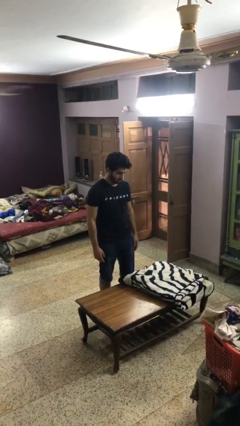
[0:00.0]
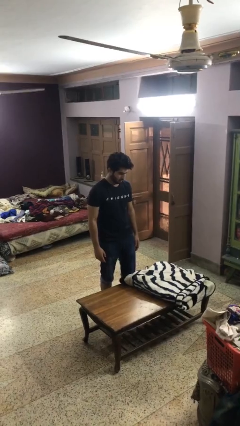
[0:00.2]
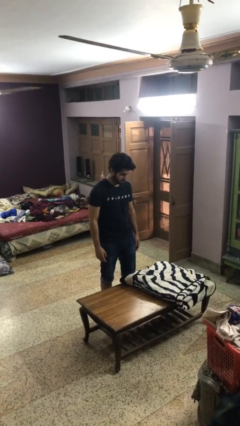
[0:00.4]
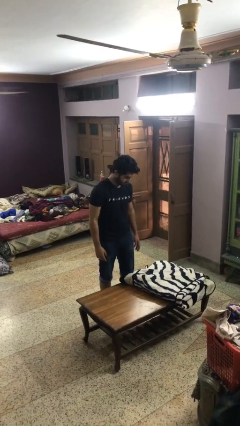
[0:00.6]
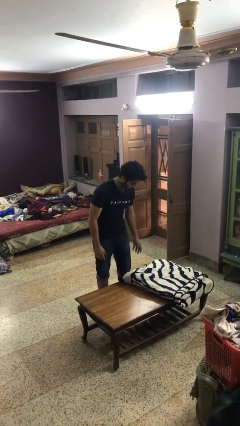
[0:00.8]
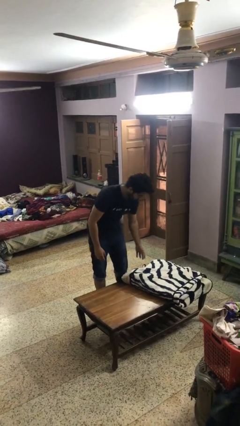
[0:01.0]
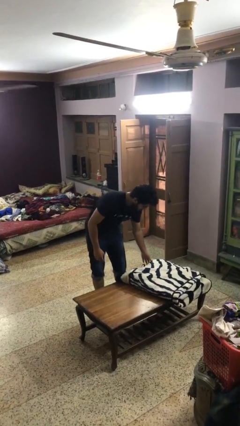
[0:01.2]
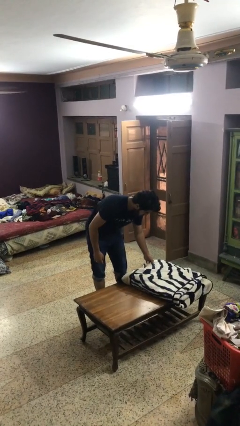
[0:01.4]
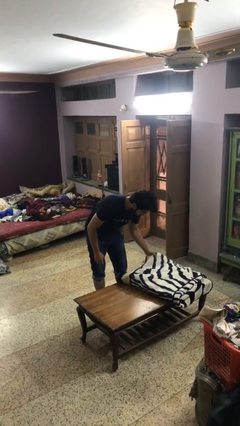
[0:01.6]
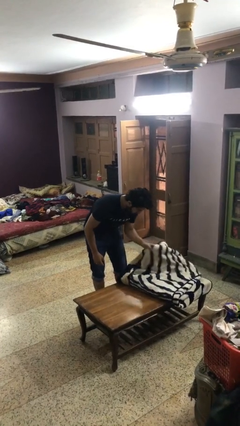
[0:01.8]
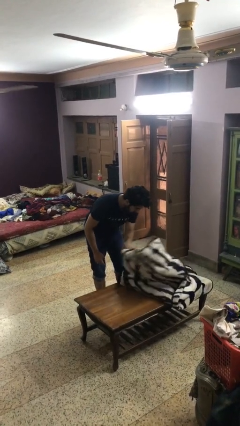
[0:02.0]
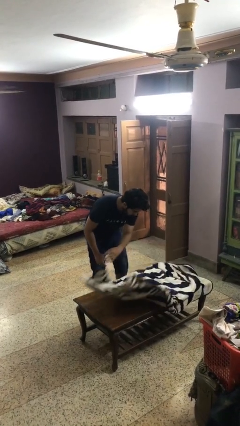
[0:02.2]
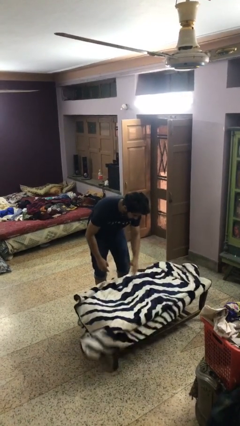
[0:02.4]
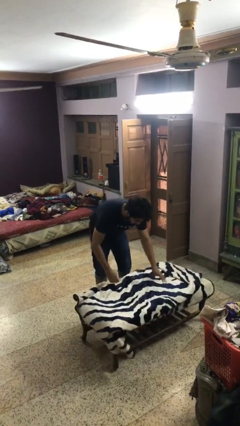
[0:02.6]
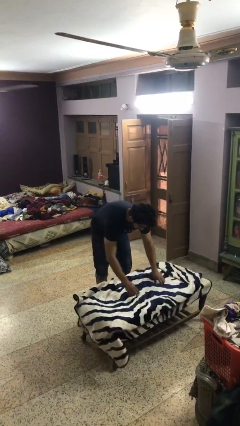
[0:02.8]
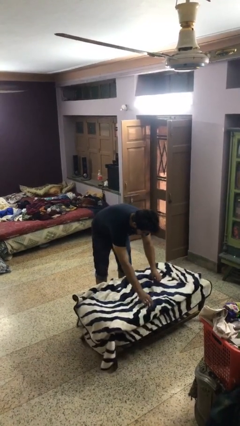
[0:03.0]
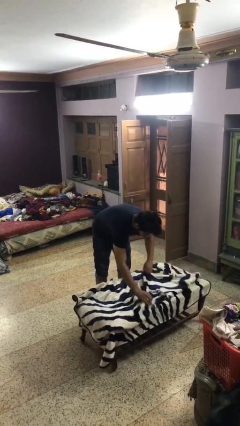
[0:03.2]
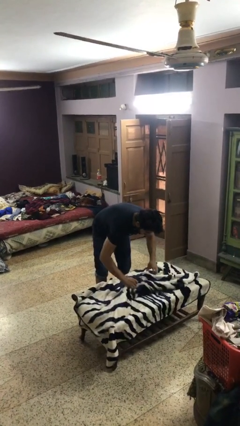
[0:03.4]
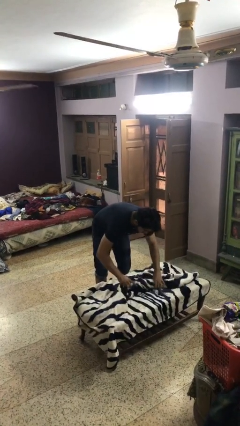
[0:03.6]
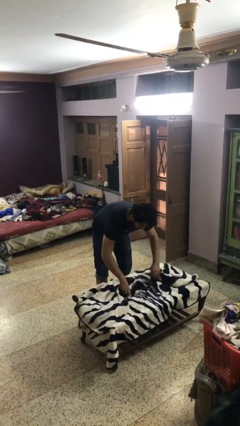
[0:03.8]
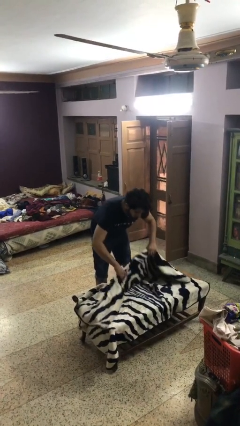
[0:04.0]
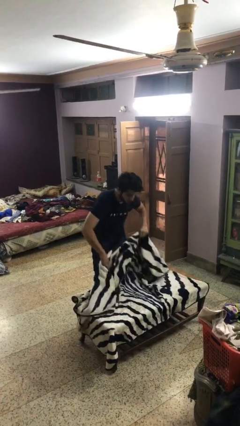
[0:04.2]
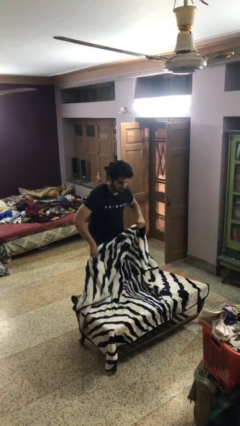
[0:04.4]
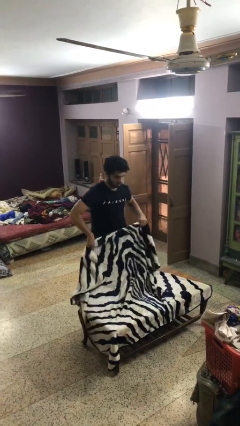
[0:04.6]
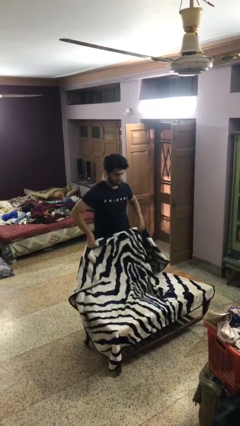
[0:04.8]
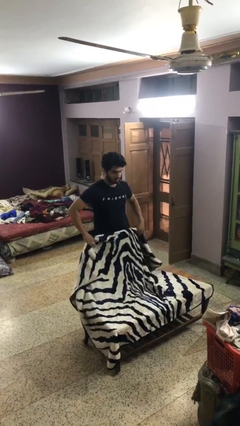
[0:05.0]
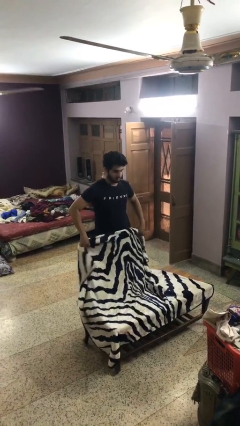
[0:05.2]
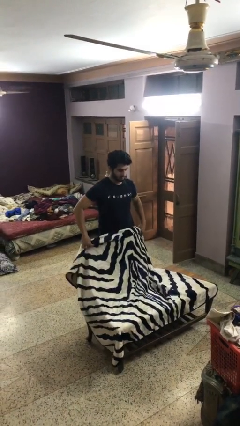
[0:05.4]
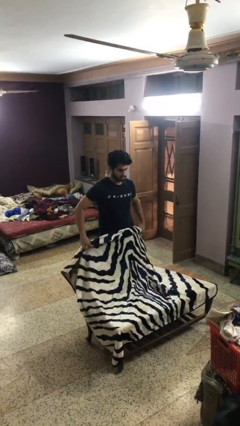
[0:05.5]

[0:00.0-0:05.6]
person unfolds blanket

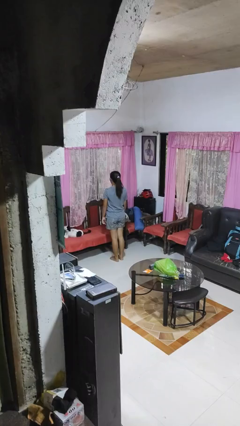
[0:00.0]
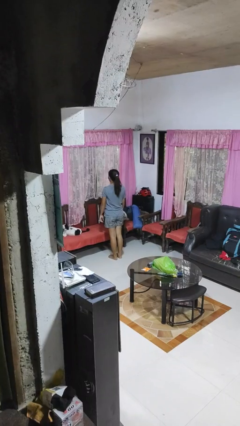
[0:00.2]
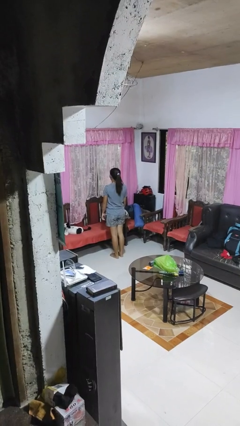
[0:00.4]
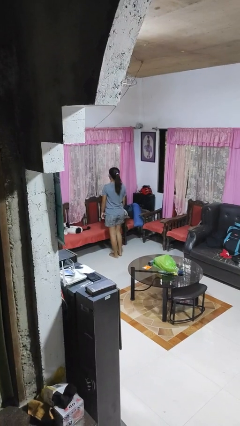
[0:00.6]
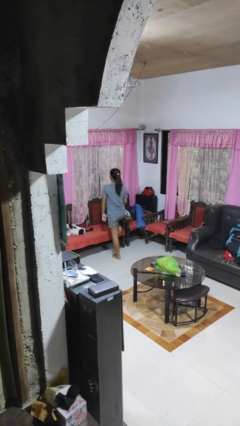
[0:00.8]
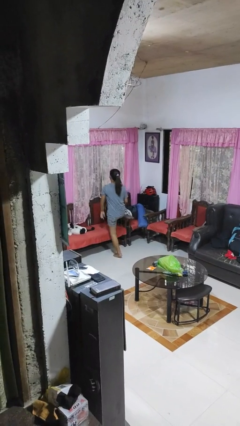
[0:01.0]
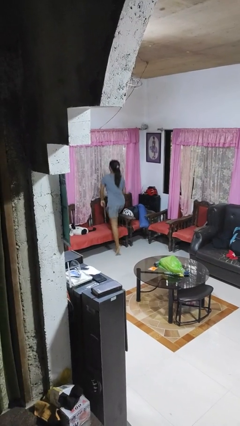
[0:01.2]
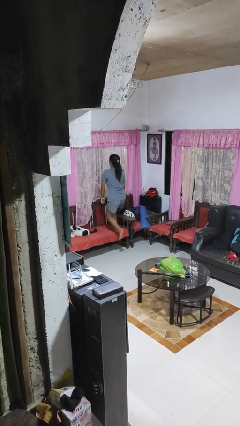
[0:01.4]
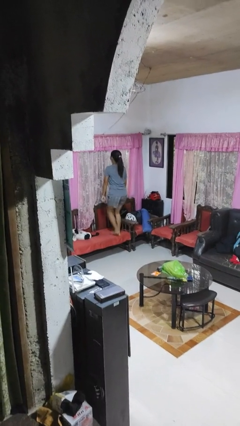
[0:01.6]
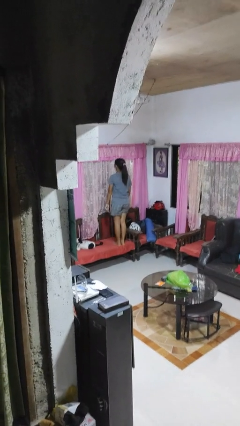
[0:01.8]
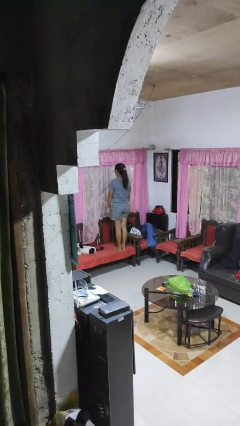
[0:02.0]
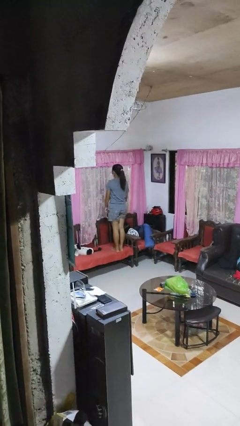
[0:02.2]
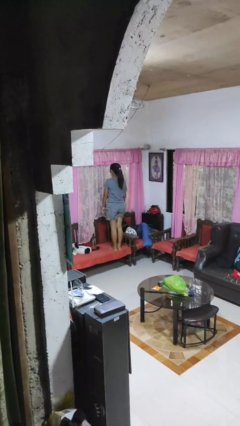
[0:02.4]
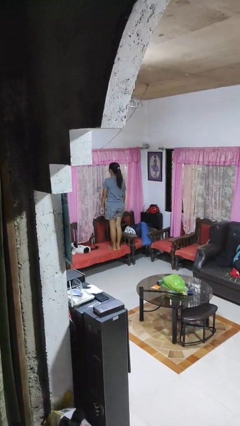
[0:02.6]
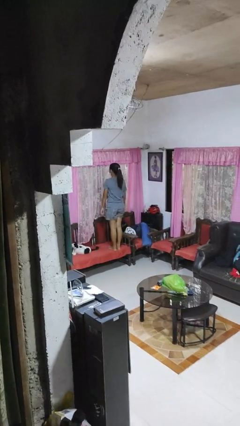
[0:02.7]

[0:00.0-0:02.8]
person climbs on chair

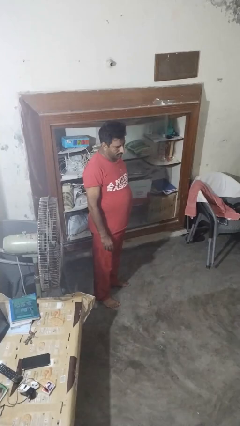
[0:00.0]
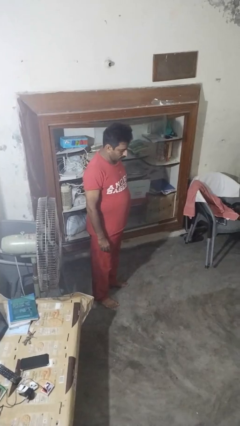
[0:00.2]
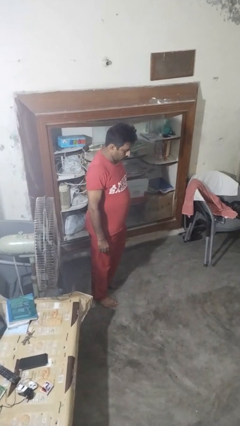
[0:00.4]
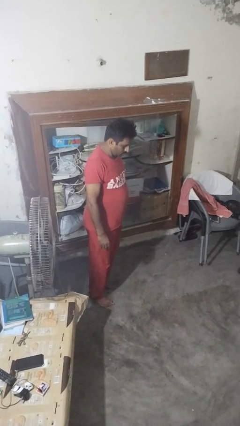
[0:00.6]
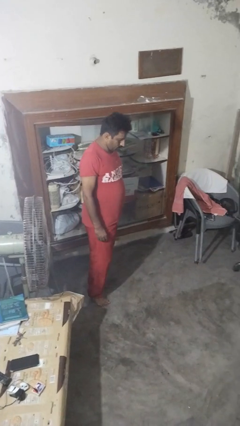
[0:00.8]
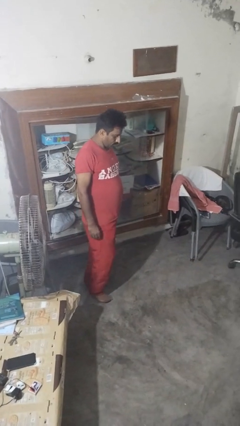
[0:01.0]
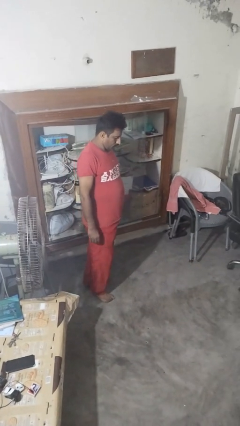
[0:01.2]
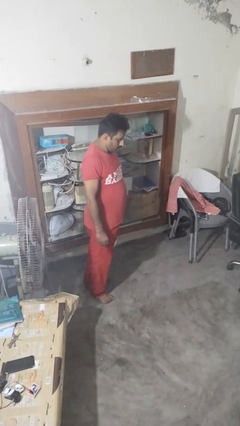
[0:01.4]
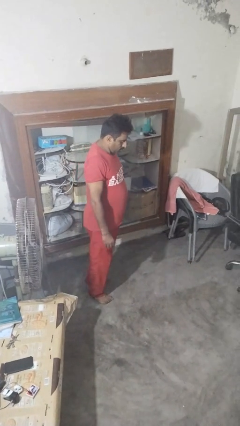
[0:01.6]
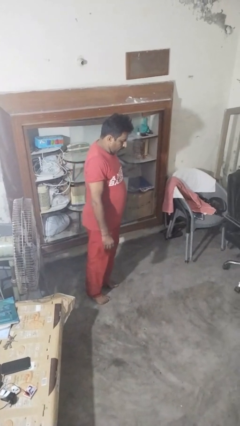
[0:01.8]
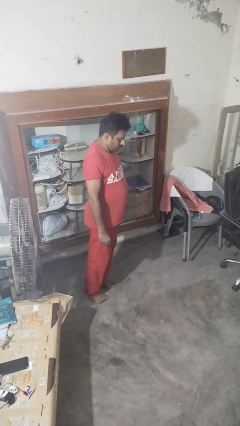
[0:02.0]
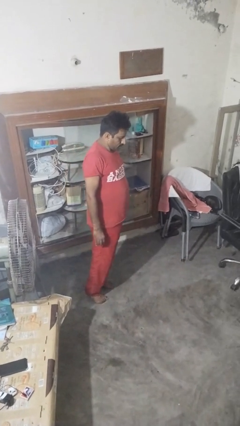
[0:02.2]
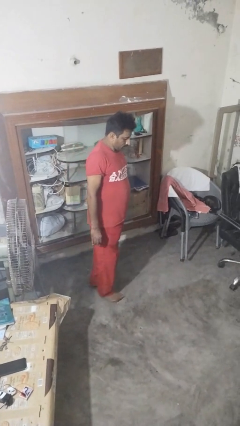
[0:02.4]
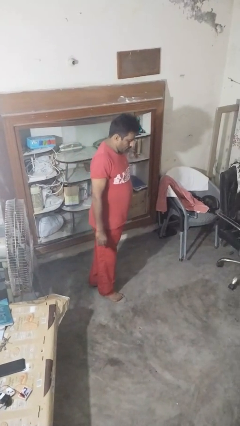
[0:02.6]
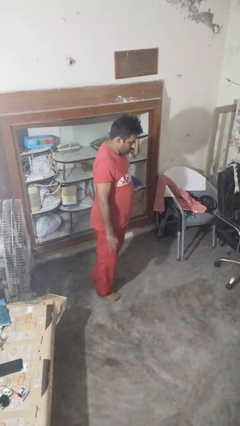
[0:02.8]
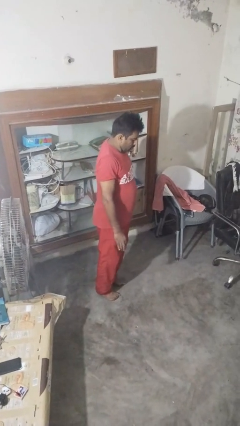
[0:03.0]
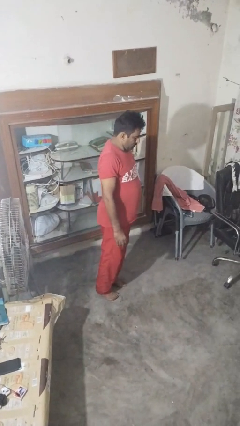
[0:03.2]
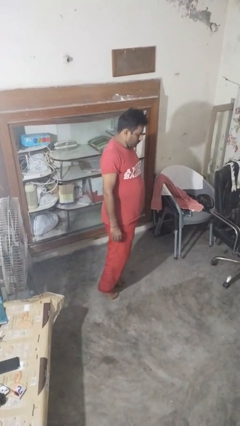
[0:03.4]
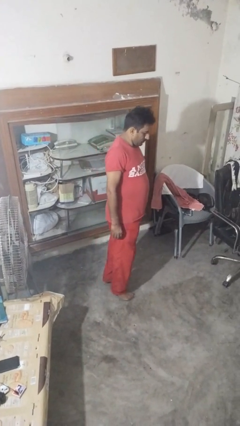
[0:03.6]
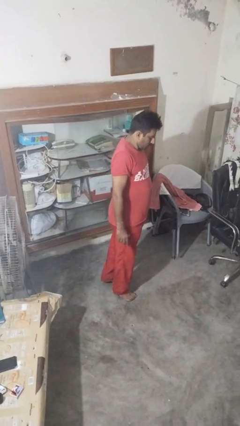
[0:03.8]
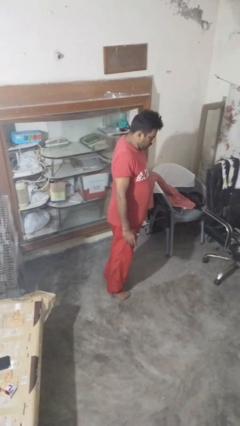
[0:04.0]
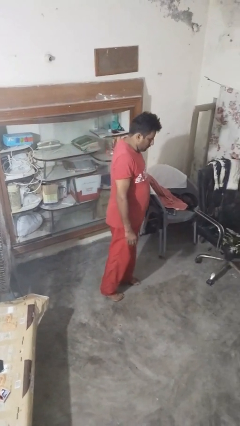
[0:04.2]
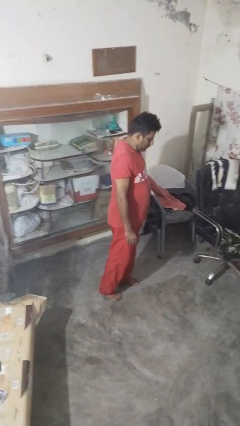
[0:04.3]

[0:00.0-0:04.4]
person walks tiptoe

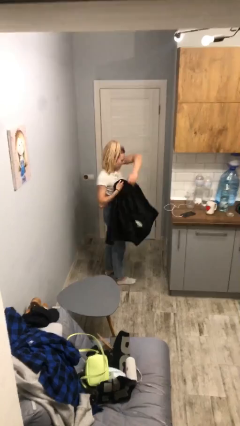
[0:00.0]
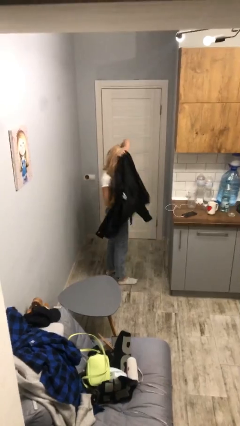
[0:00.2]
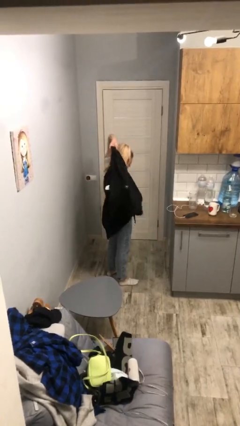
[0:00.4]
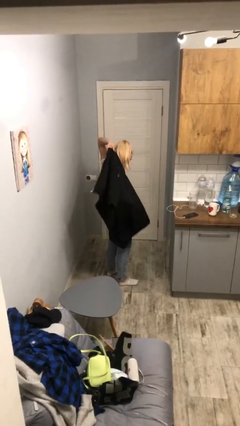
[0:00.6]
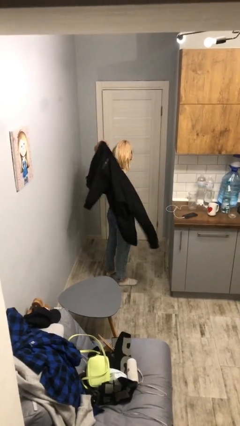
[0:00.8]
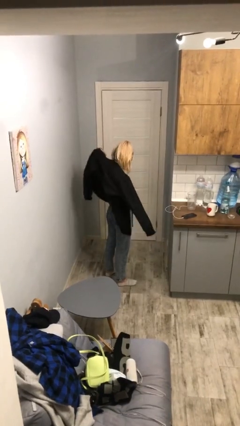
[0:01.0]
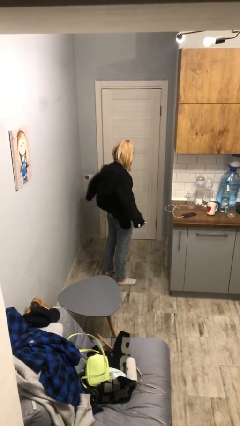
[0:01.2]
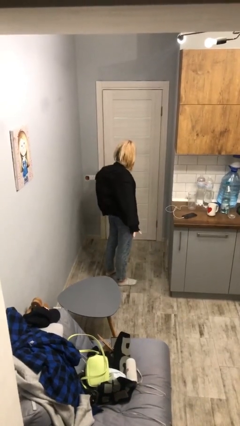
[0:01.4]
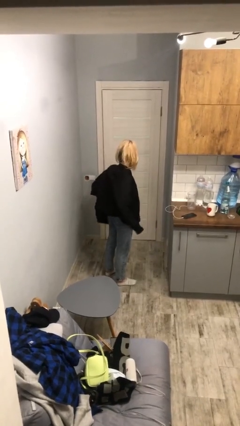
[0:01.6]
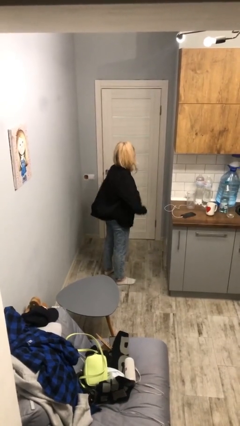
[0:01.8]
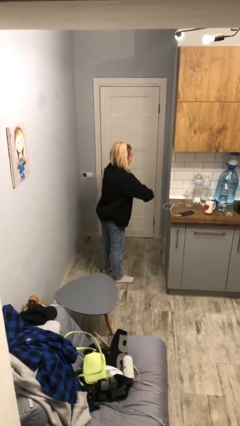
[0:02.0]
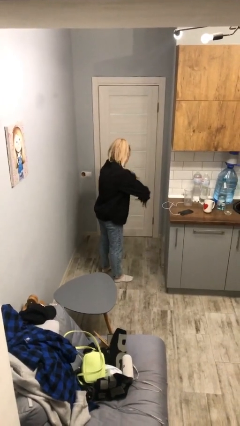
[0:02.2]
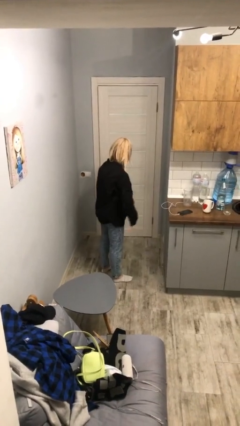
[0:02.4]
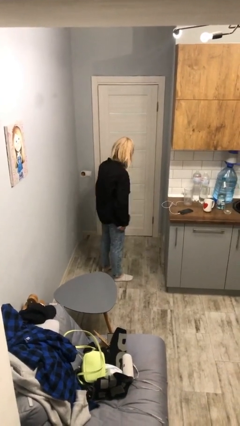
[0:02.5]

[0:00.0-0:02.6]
person puts on jacket

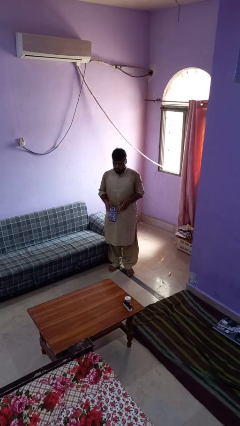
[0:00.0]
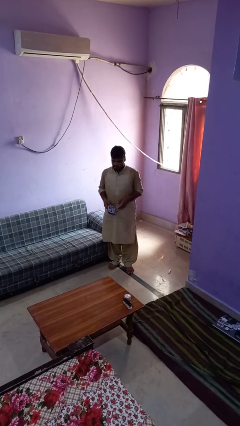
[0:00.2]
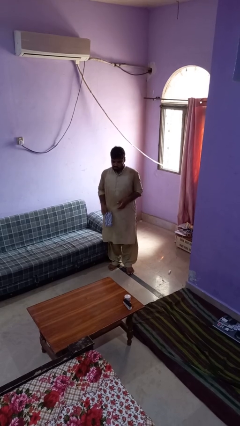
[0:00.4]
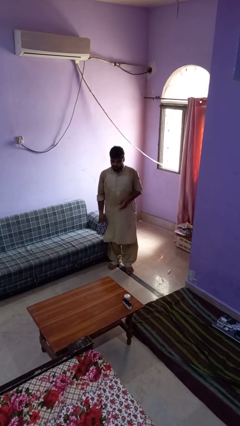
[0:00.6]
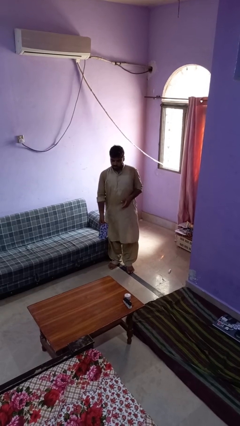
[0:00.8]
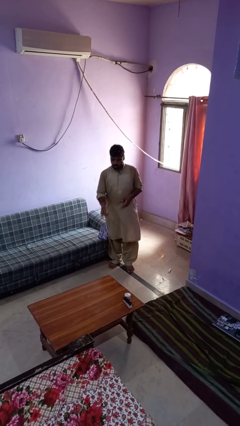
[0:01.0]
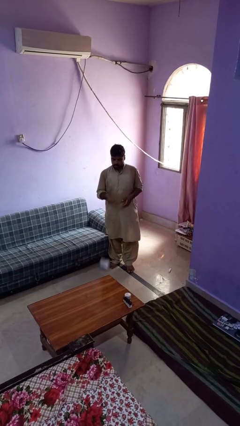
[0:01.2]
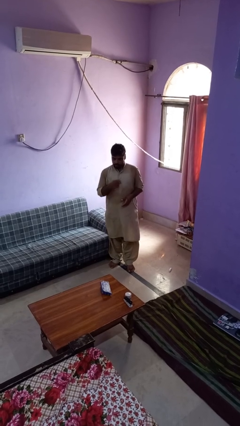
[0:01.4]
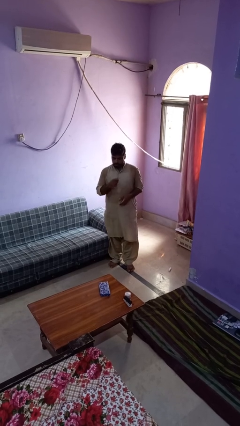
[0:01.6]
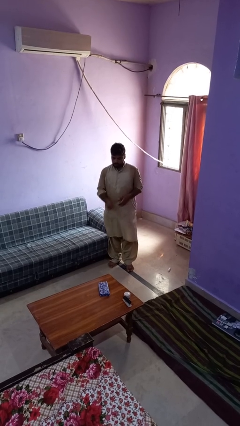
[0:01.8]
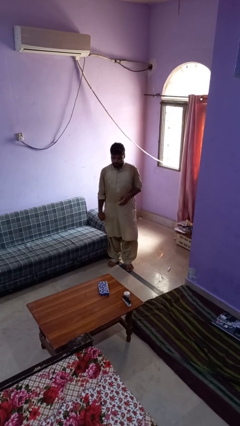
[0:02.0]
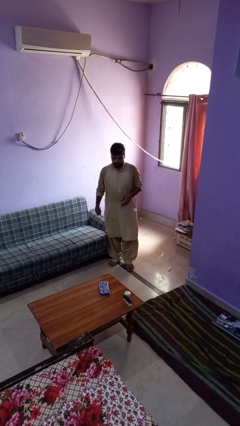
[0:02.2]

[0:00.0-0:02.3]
person throws object on table

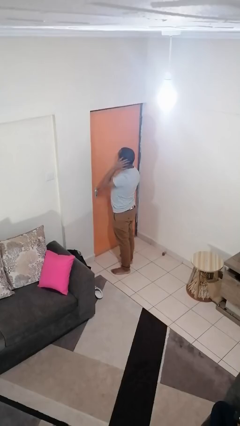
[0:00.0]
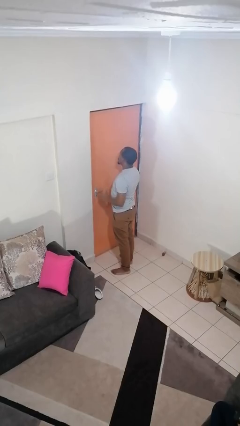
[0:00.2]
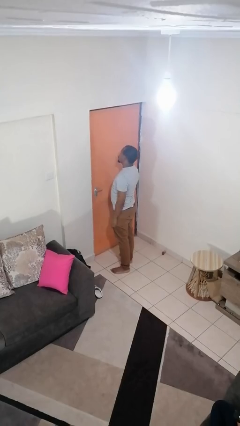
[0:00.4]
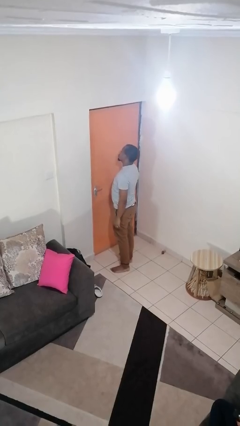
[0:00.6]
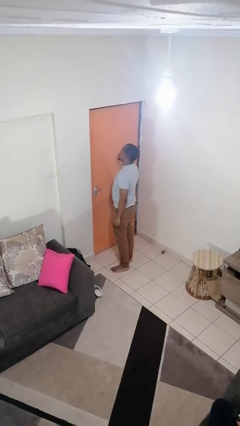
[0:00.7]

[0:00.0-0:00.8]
person strokes hair
